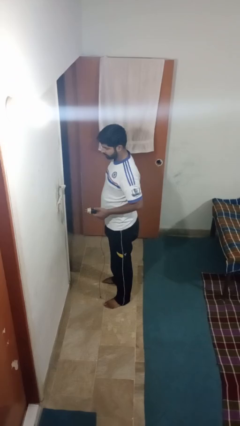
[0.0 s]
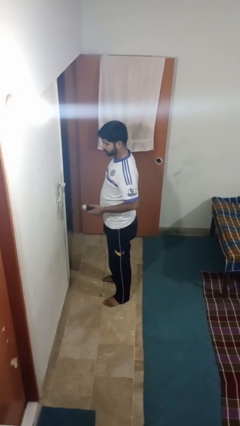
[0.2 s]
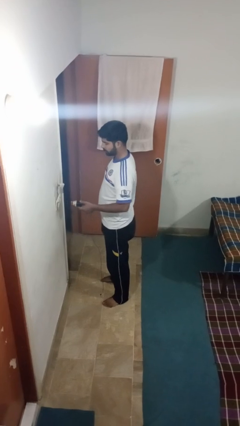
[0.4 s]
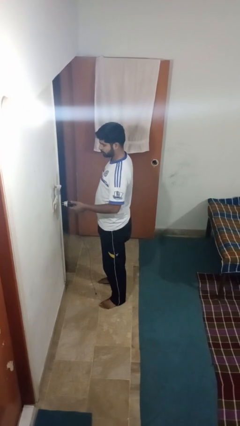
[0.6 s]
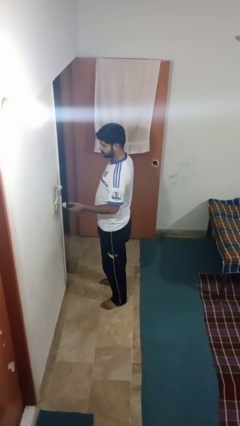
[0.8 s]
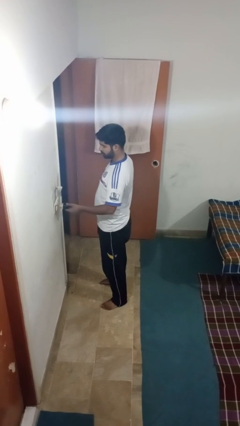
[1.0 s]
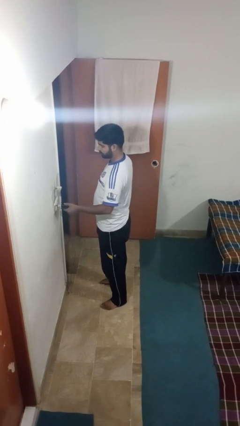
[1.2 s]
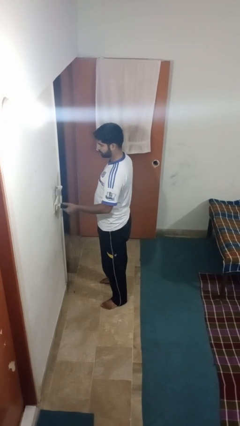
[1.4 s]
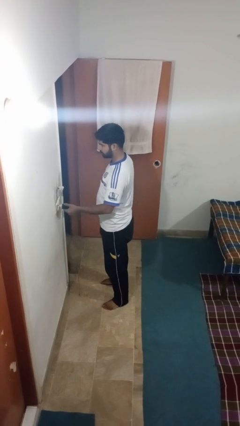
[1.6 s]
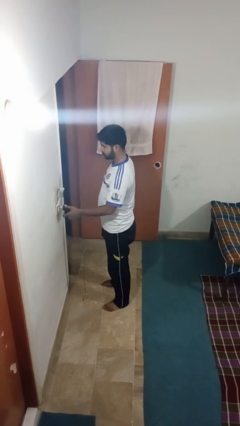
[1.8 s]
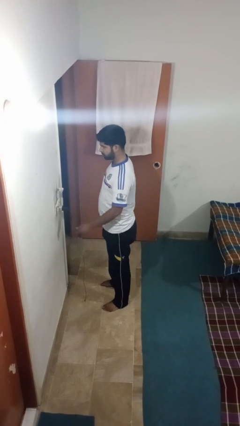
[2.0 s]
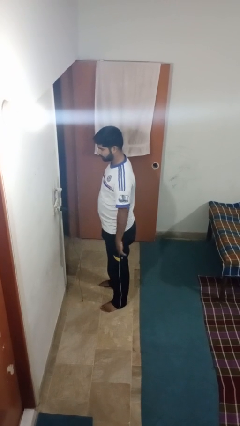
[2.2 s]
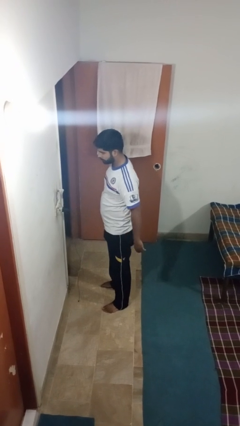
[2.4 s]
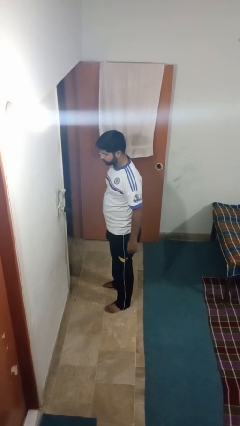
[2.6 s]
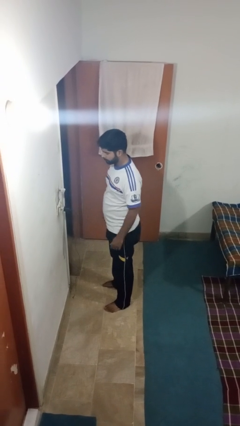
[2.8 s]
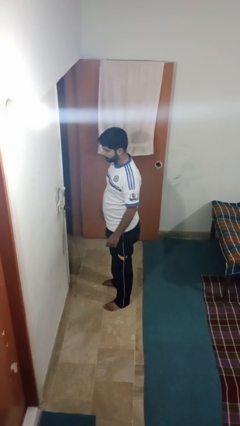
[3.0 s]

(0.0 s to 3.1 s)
person plugs into electrical socket

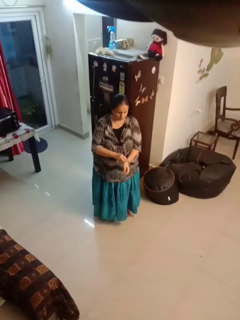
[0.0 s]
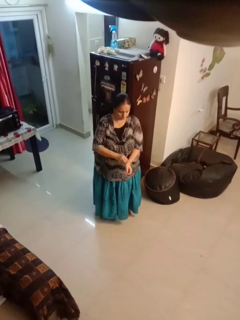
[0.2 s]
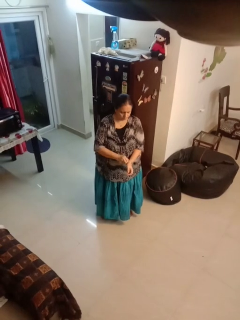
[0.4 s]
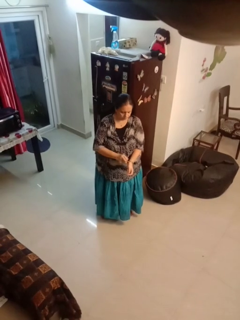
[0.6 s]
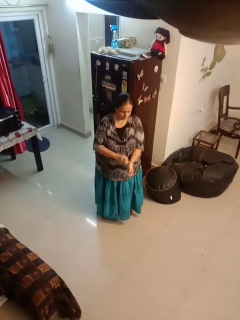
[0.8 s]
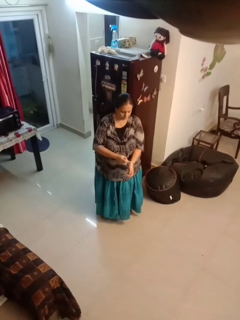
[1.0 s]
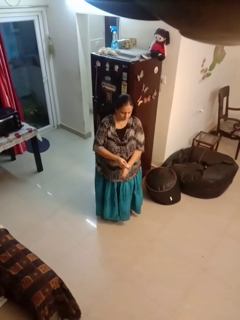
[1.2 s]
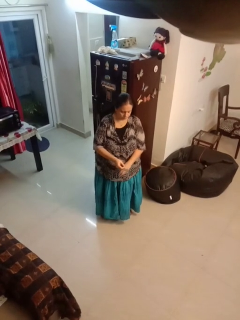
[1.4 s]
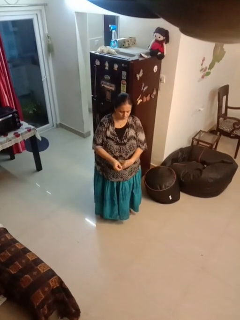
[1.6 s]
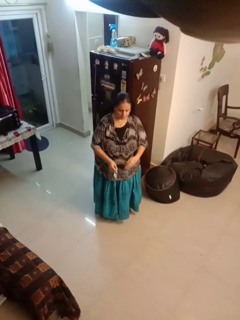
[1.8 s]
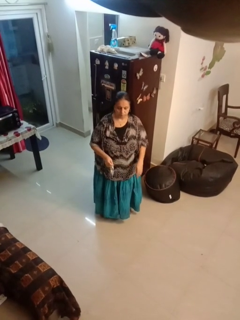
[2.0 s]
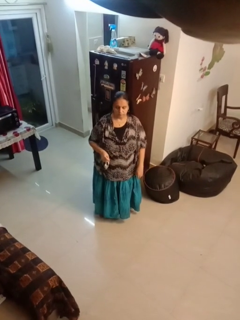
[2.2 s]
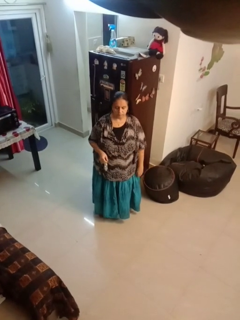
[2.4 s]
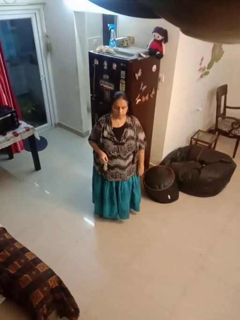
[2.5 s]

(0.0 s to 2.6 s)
person takes off wristwatch

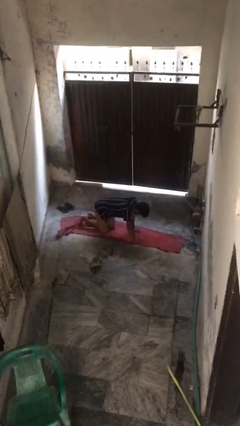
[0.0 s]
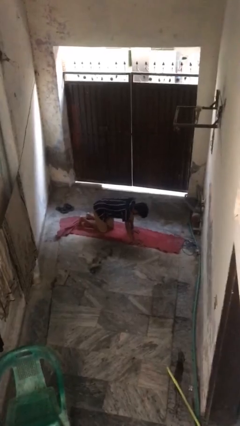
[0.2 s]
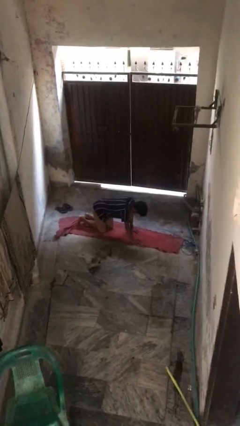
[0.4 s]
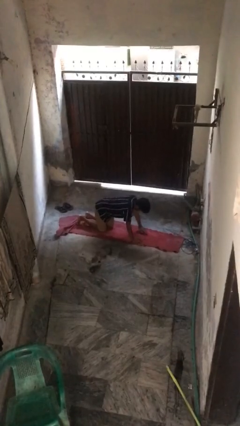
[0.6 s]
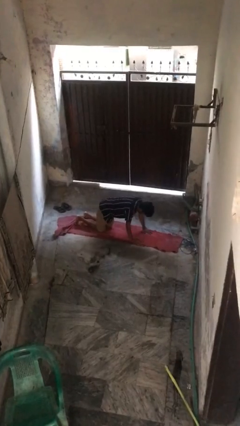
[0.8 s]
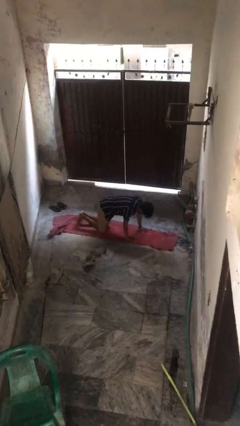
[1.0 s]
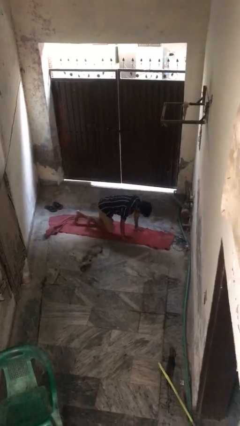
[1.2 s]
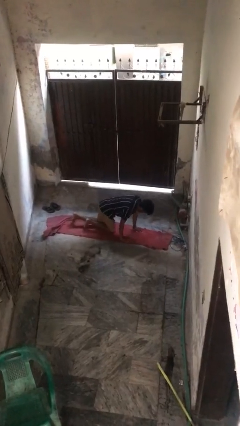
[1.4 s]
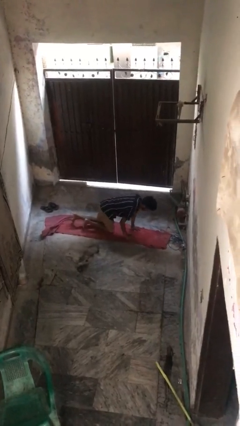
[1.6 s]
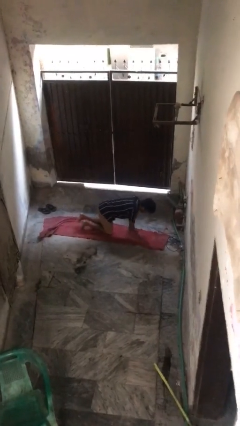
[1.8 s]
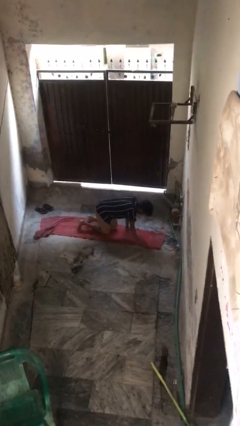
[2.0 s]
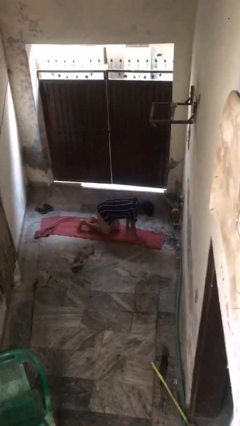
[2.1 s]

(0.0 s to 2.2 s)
person crawls

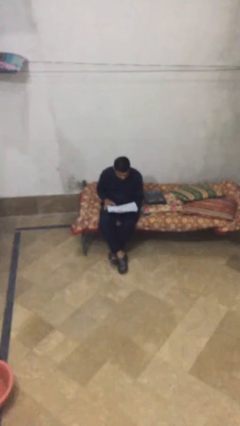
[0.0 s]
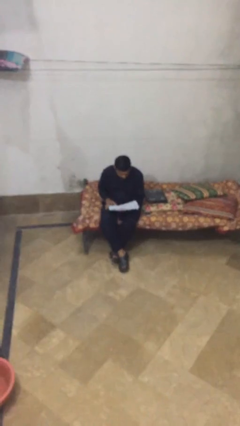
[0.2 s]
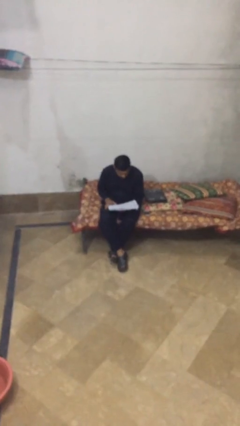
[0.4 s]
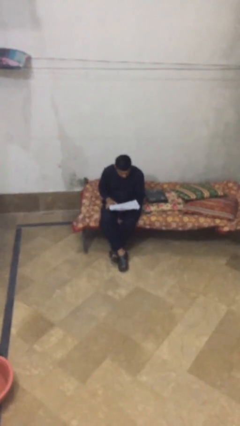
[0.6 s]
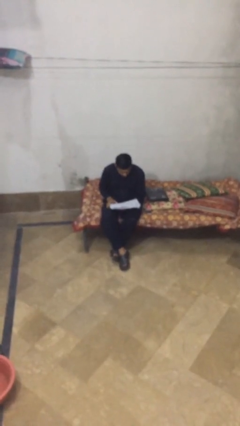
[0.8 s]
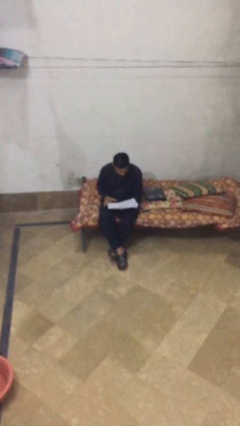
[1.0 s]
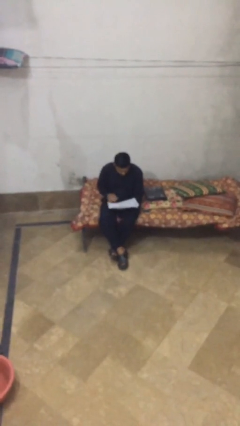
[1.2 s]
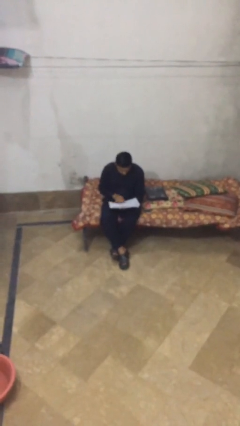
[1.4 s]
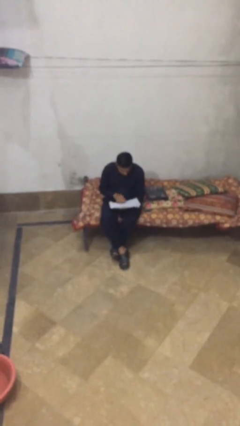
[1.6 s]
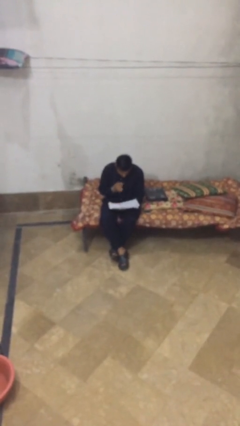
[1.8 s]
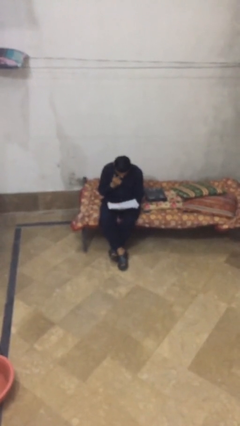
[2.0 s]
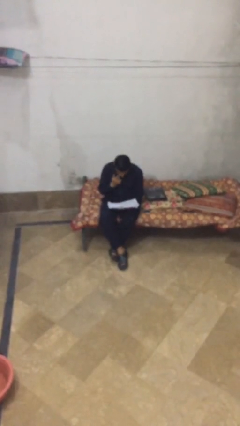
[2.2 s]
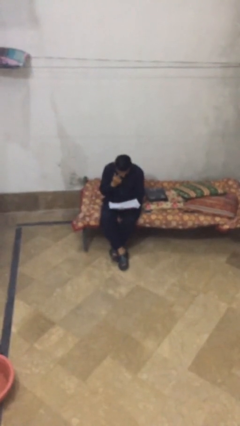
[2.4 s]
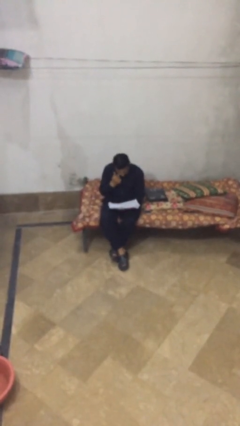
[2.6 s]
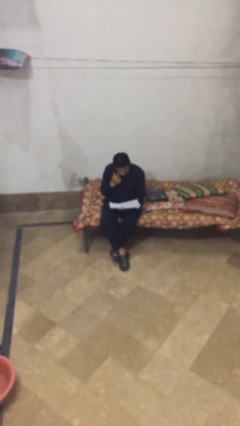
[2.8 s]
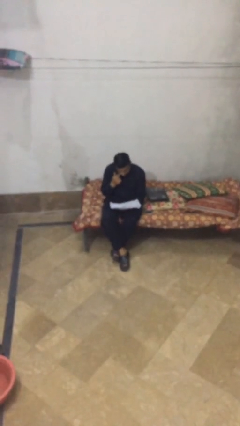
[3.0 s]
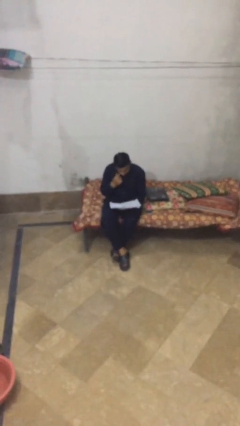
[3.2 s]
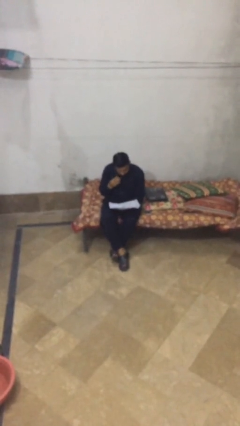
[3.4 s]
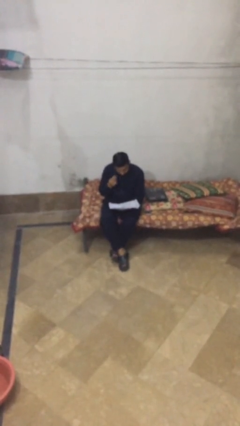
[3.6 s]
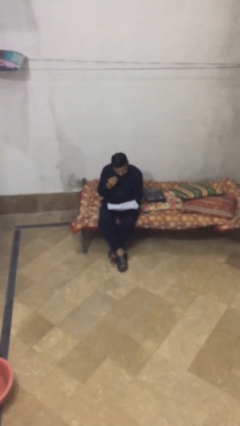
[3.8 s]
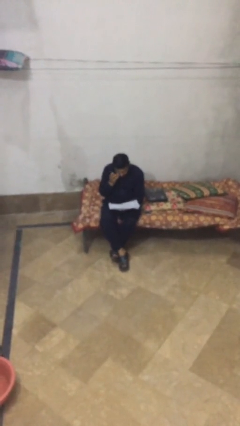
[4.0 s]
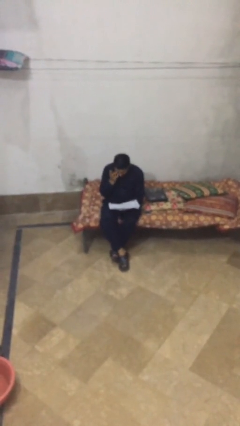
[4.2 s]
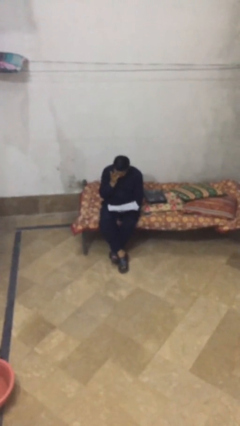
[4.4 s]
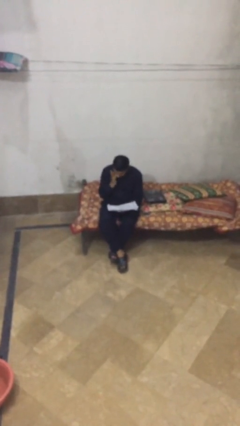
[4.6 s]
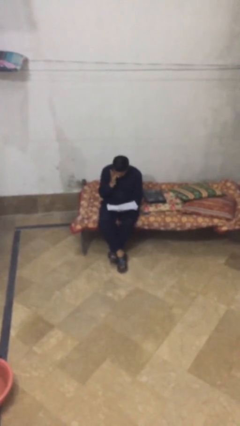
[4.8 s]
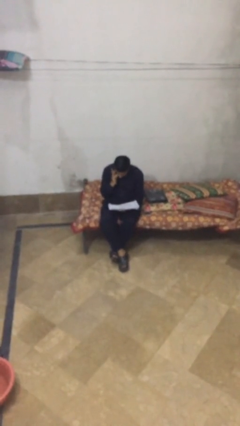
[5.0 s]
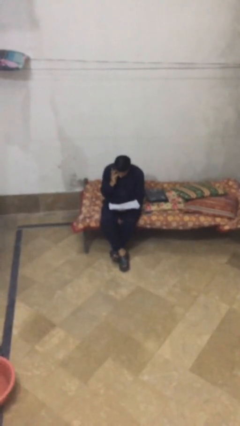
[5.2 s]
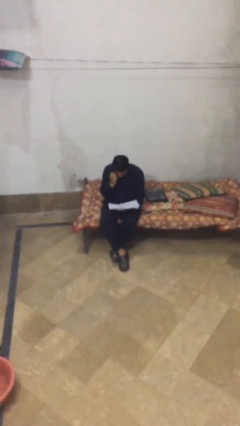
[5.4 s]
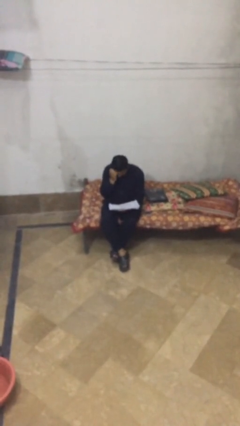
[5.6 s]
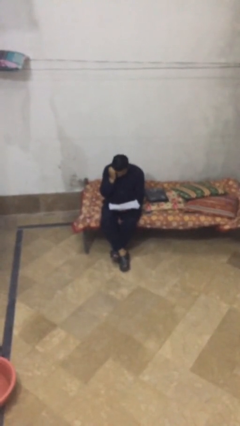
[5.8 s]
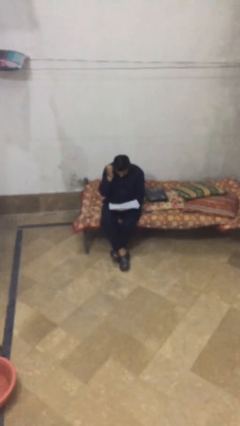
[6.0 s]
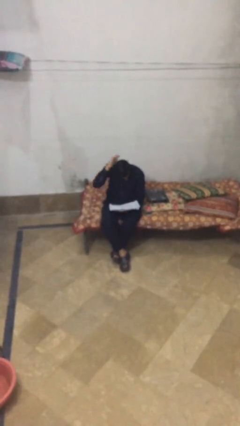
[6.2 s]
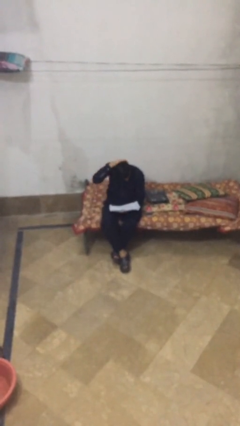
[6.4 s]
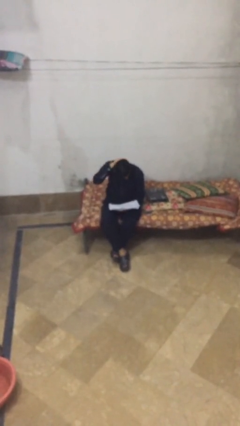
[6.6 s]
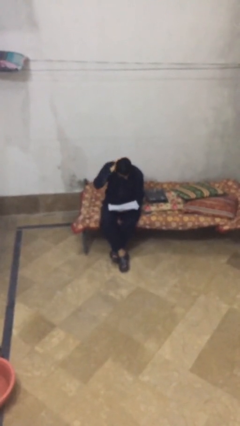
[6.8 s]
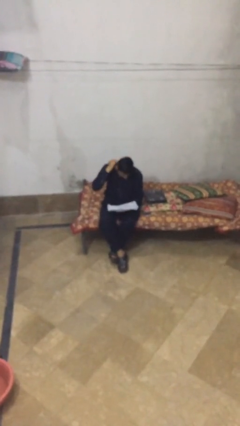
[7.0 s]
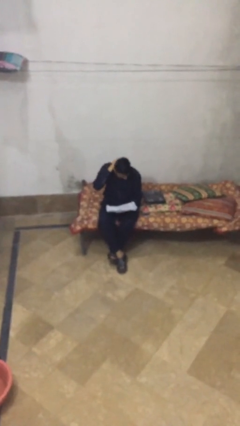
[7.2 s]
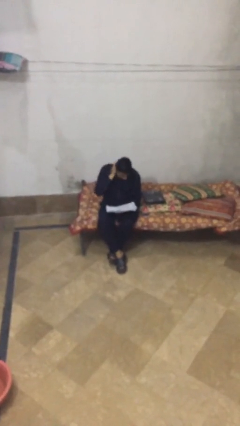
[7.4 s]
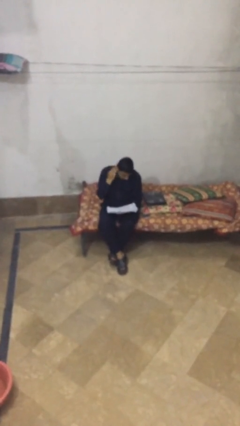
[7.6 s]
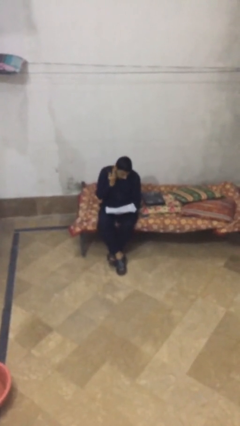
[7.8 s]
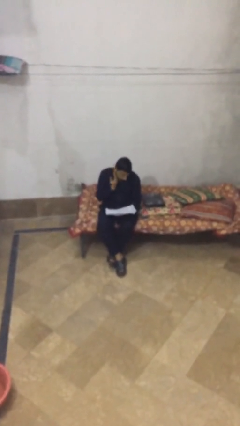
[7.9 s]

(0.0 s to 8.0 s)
person reads document

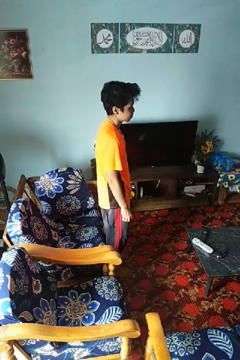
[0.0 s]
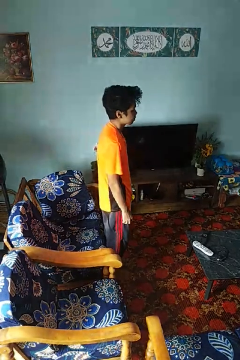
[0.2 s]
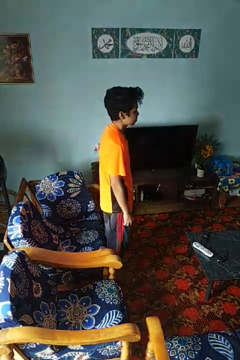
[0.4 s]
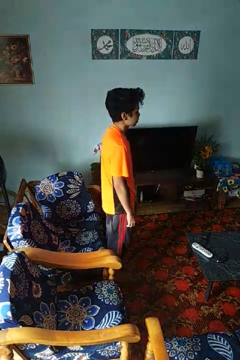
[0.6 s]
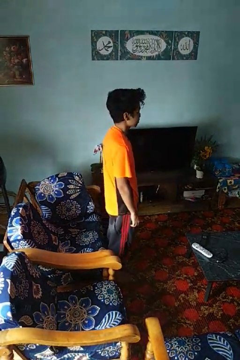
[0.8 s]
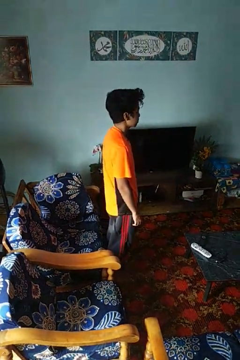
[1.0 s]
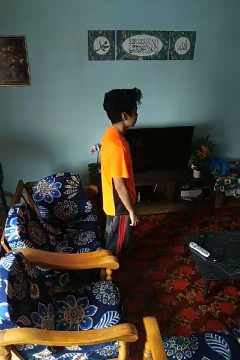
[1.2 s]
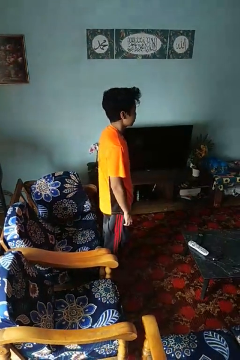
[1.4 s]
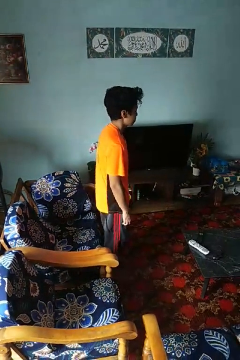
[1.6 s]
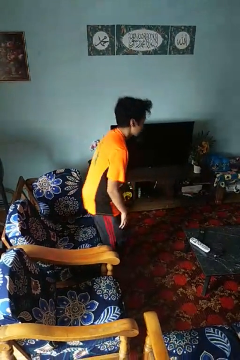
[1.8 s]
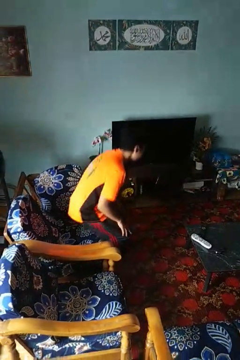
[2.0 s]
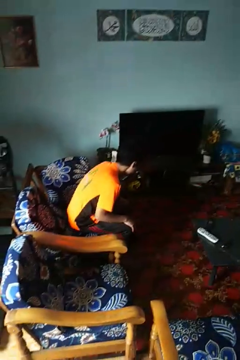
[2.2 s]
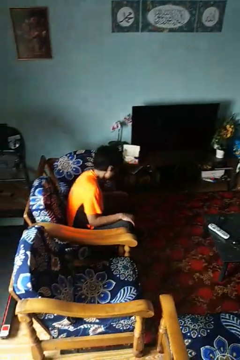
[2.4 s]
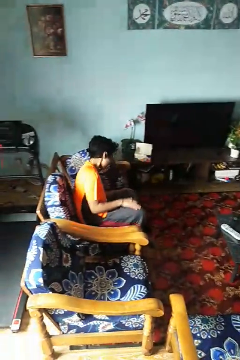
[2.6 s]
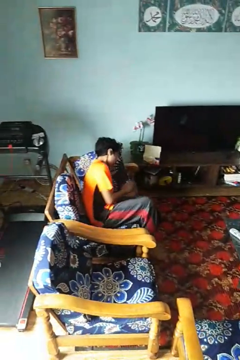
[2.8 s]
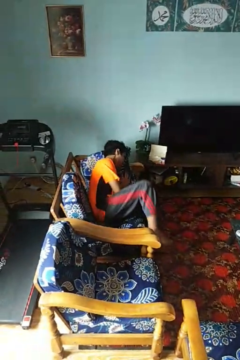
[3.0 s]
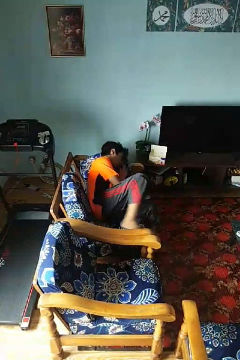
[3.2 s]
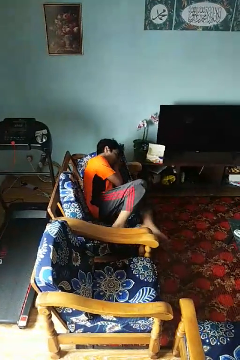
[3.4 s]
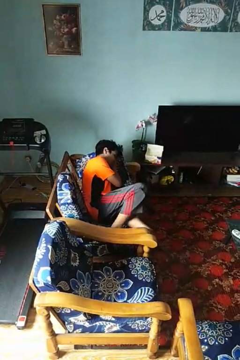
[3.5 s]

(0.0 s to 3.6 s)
person lies down on couch
